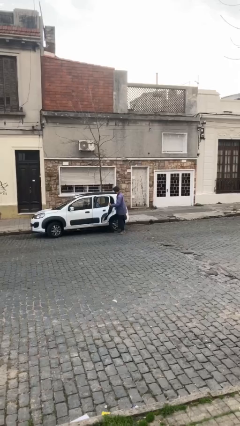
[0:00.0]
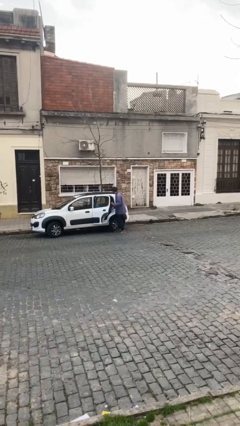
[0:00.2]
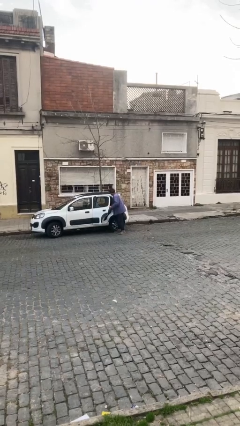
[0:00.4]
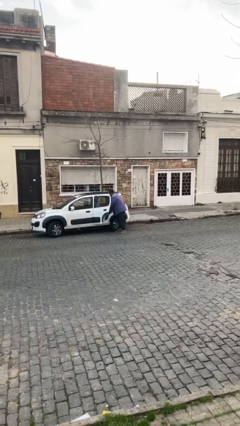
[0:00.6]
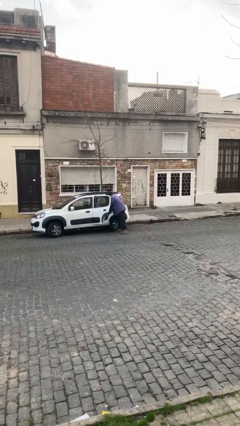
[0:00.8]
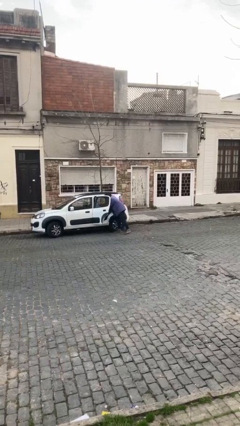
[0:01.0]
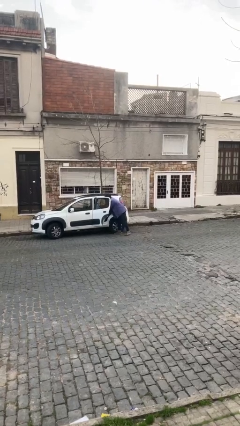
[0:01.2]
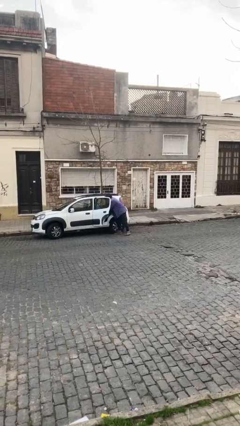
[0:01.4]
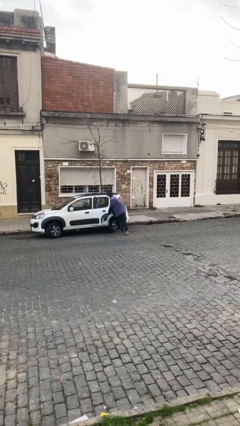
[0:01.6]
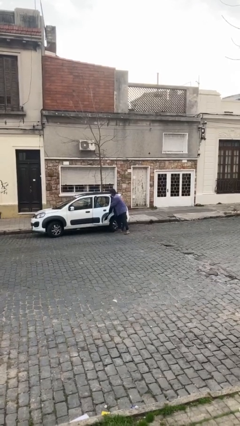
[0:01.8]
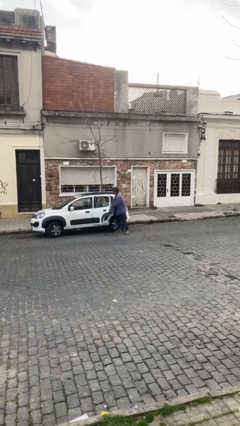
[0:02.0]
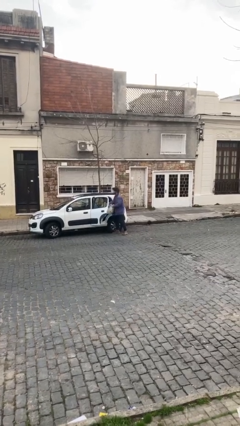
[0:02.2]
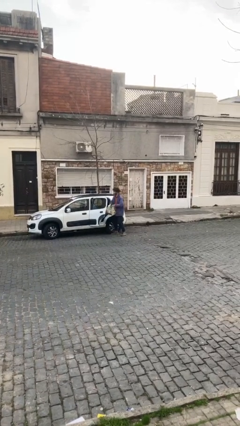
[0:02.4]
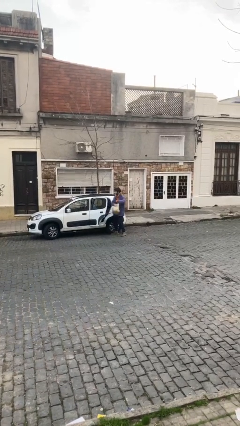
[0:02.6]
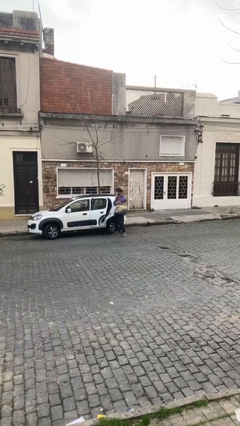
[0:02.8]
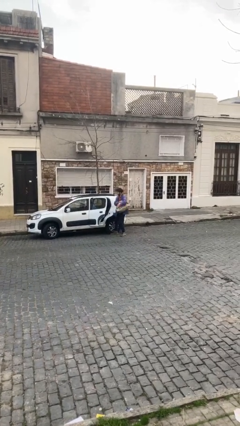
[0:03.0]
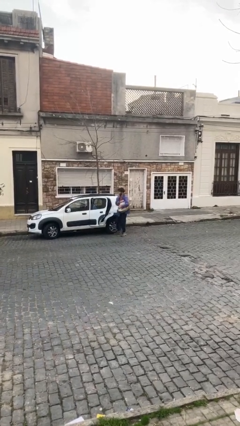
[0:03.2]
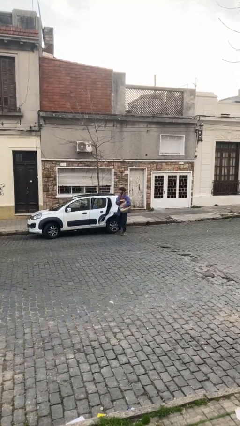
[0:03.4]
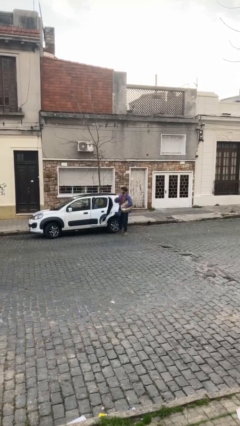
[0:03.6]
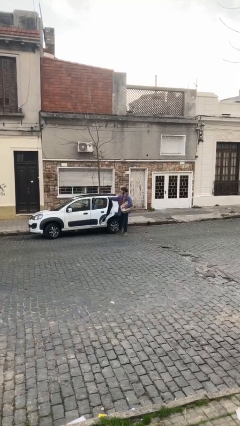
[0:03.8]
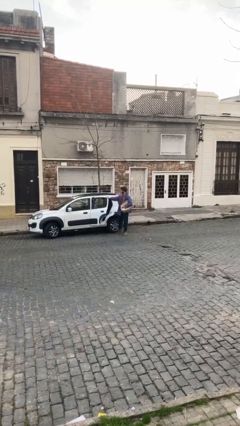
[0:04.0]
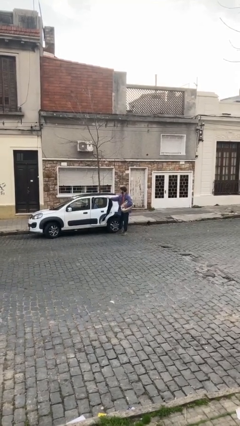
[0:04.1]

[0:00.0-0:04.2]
person unloads car

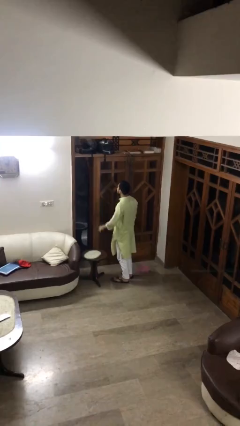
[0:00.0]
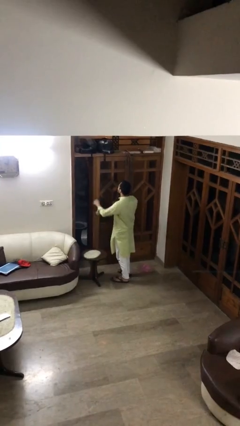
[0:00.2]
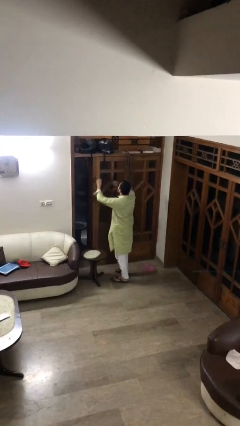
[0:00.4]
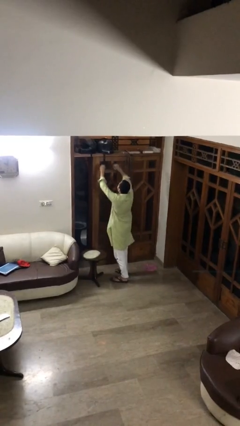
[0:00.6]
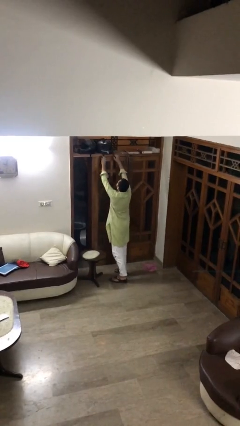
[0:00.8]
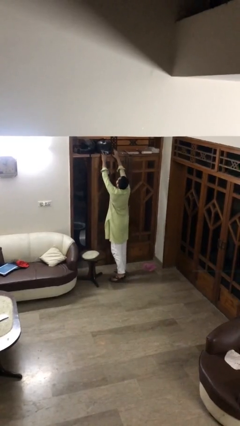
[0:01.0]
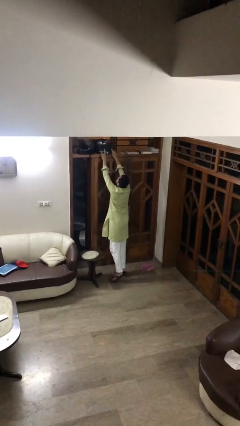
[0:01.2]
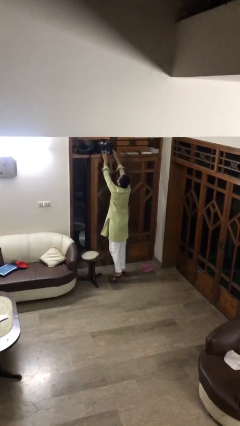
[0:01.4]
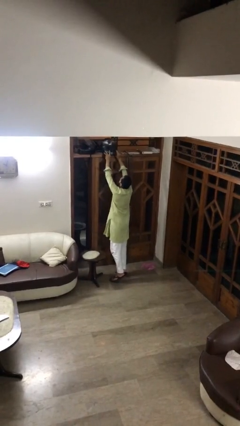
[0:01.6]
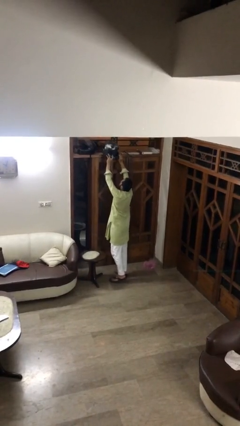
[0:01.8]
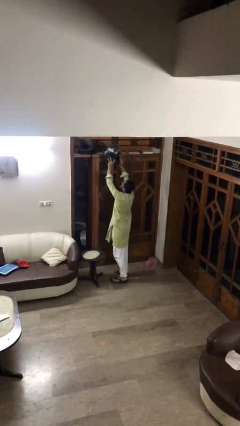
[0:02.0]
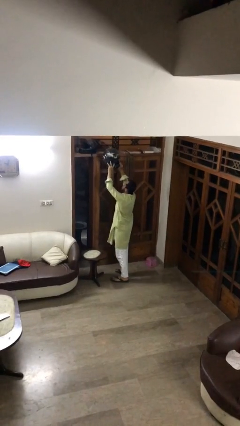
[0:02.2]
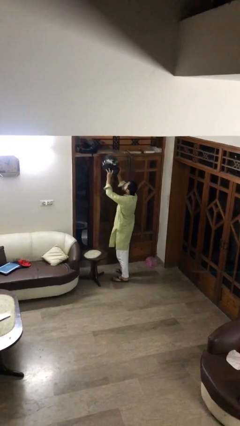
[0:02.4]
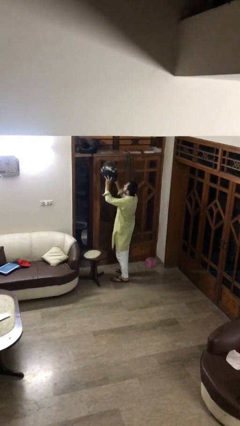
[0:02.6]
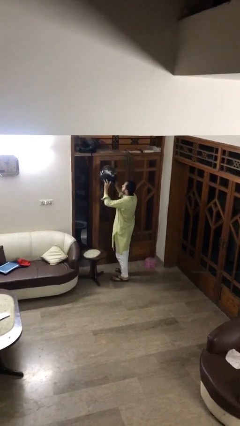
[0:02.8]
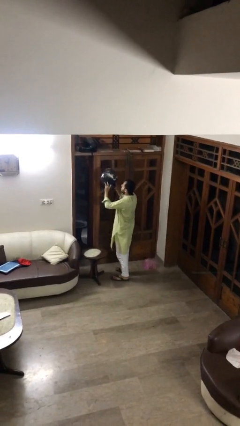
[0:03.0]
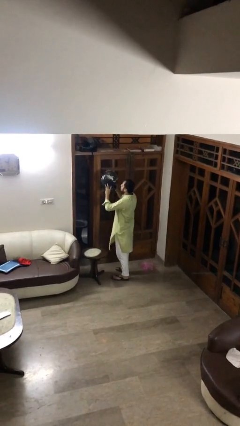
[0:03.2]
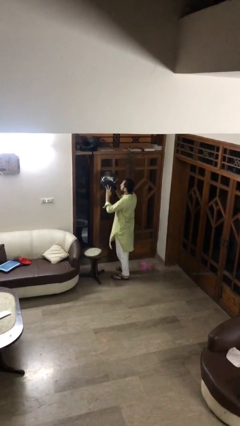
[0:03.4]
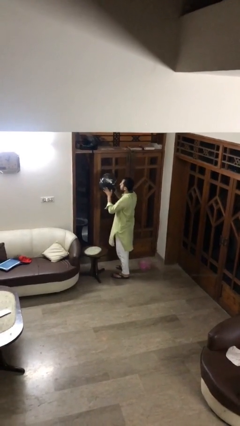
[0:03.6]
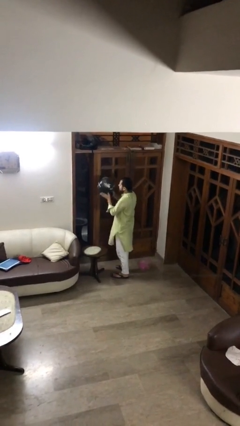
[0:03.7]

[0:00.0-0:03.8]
person picks up object from shelf

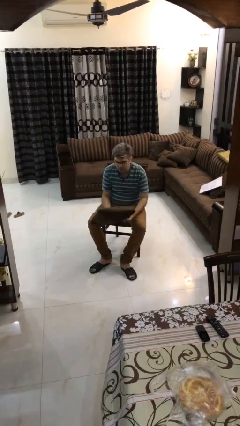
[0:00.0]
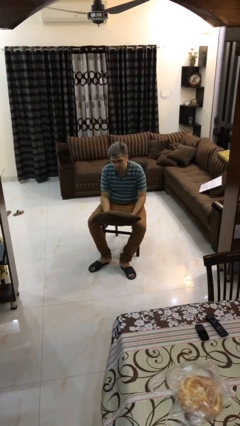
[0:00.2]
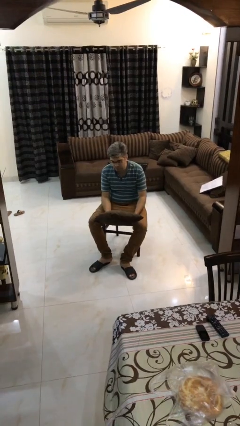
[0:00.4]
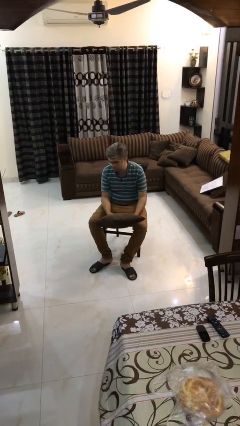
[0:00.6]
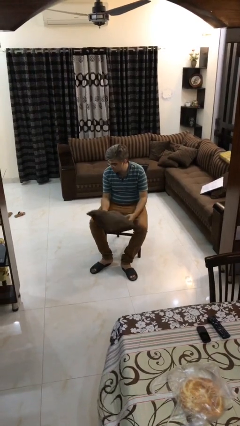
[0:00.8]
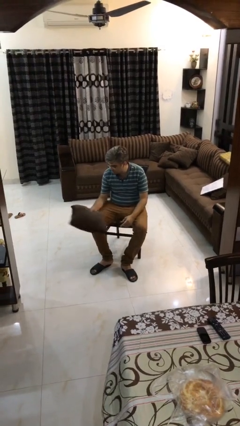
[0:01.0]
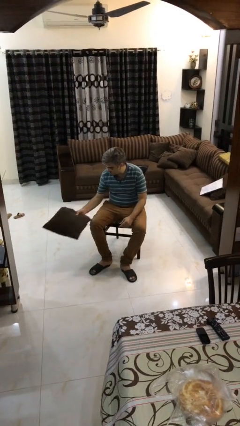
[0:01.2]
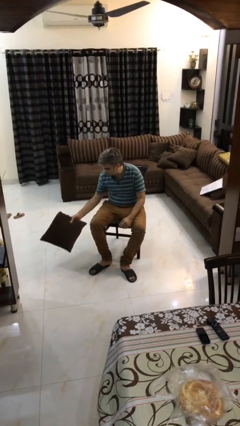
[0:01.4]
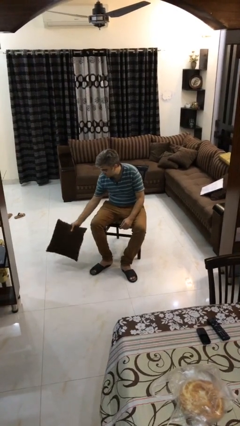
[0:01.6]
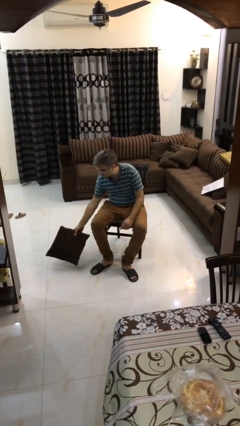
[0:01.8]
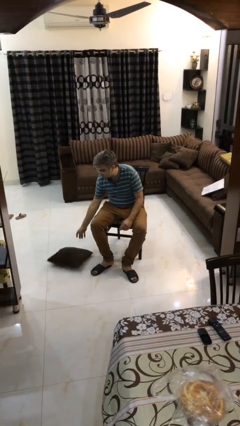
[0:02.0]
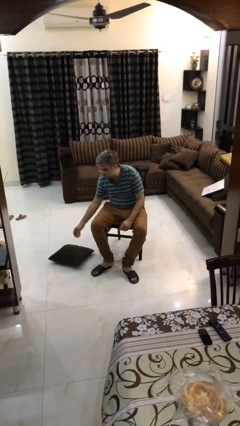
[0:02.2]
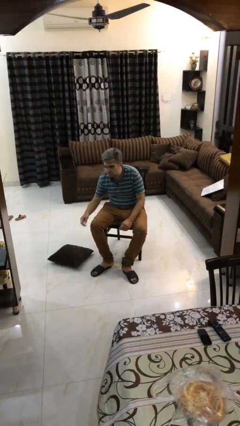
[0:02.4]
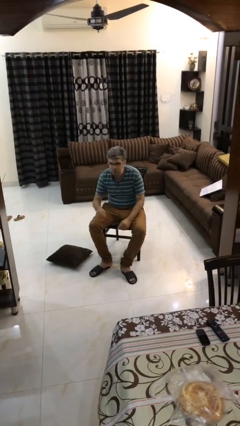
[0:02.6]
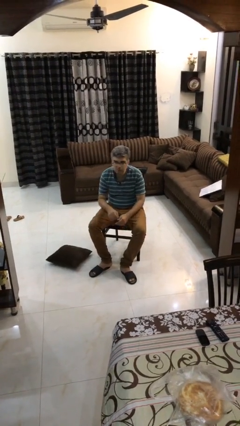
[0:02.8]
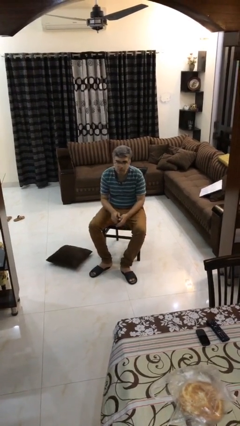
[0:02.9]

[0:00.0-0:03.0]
person puts down object on floor

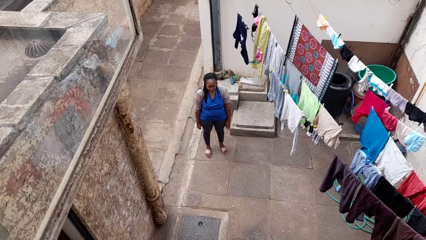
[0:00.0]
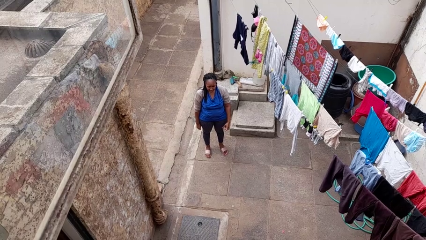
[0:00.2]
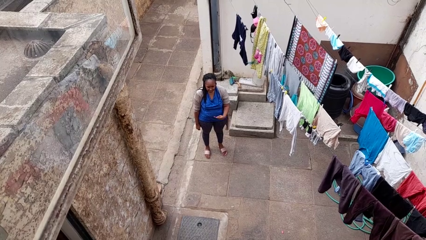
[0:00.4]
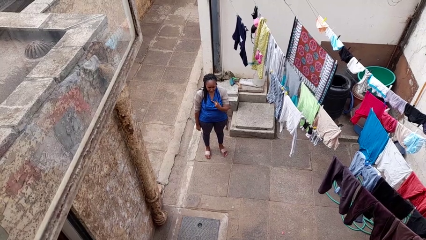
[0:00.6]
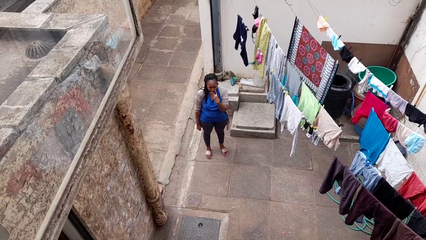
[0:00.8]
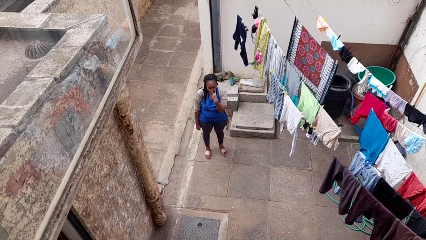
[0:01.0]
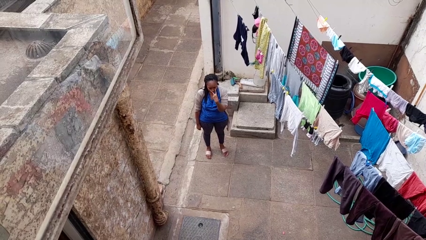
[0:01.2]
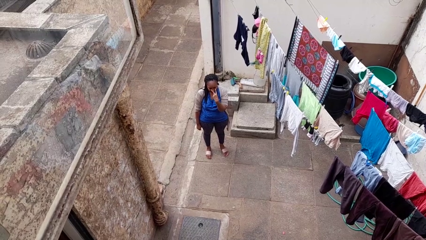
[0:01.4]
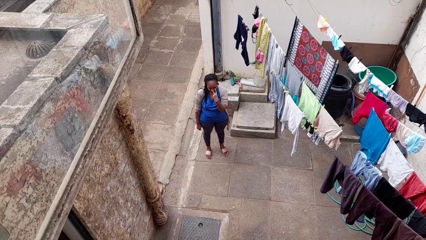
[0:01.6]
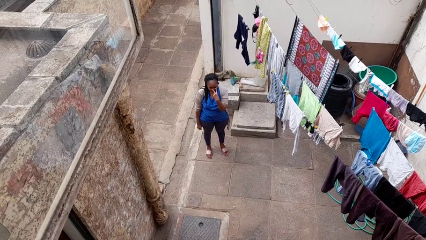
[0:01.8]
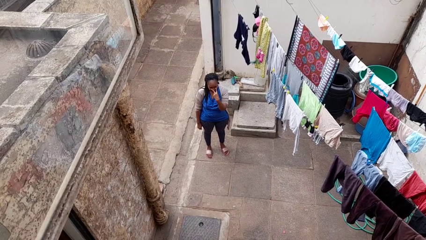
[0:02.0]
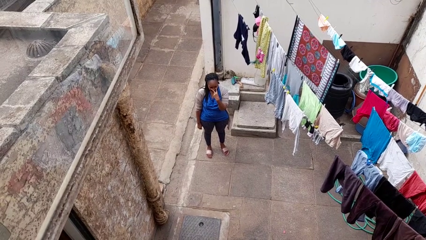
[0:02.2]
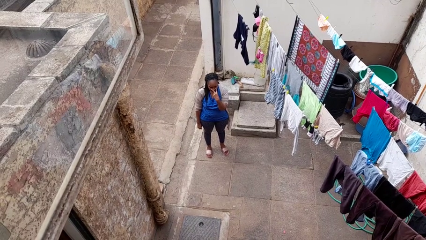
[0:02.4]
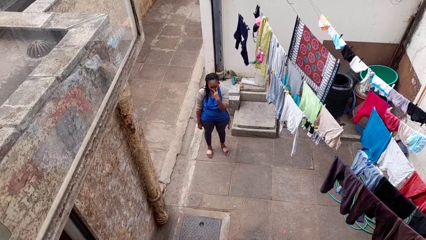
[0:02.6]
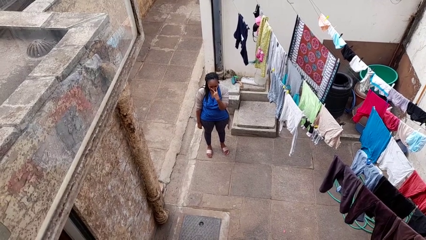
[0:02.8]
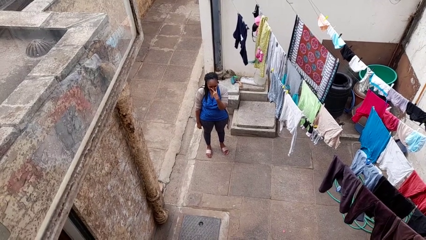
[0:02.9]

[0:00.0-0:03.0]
person gestures watch closely

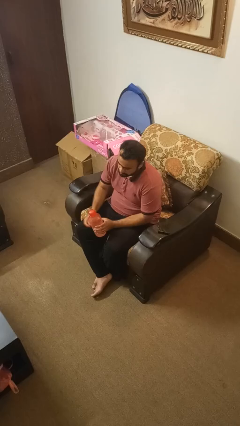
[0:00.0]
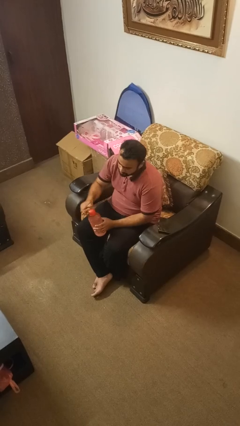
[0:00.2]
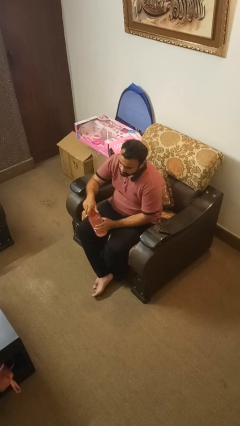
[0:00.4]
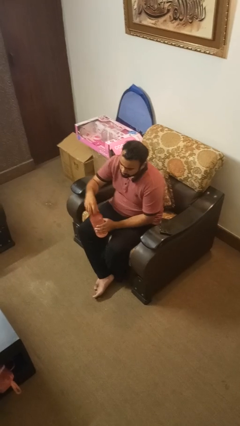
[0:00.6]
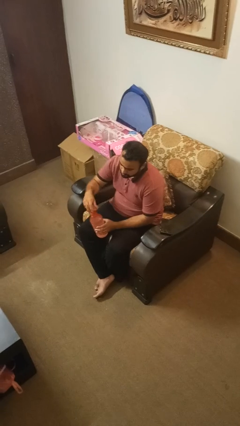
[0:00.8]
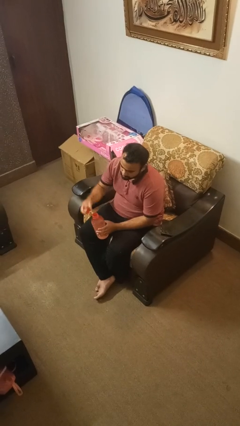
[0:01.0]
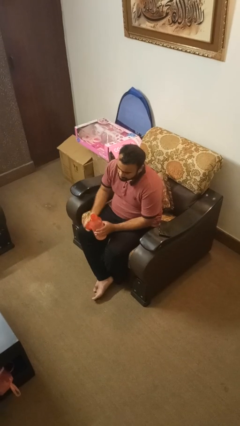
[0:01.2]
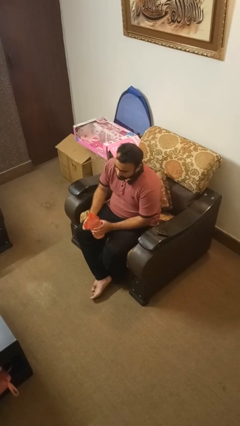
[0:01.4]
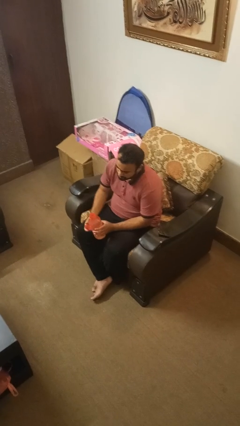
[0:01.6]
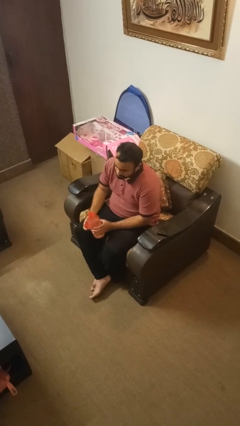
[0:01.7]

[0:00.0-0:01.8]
person unscrews lid from bottle

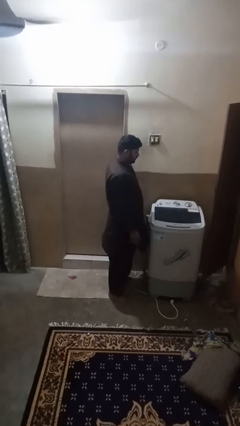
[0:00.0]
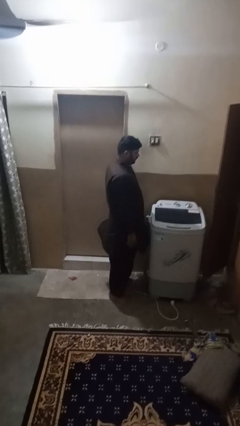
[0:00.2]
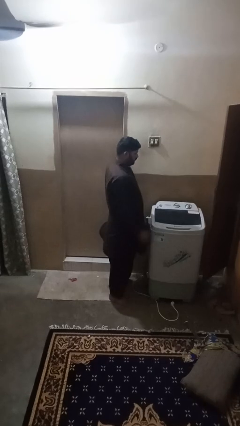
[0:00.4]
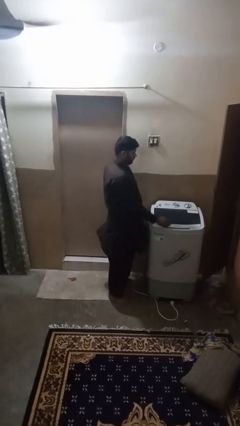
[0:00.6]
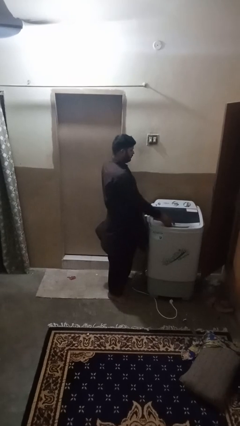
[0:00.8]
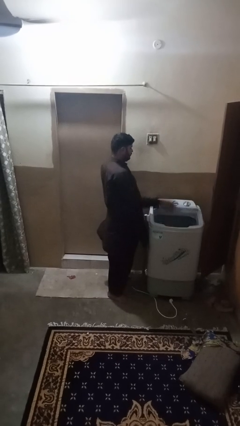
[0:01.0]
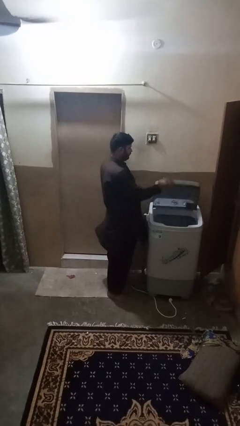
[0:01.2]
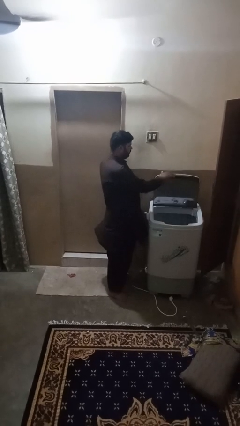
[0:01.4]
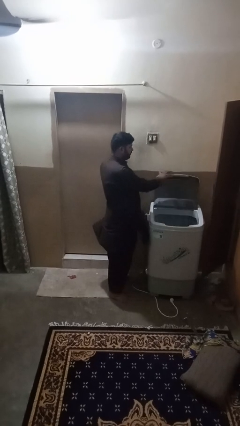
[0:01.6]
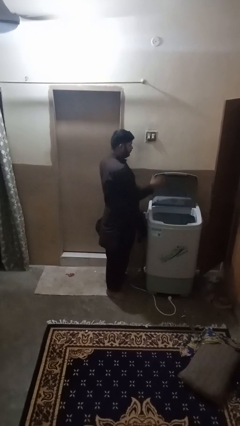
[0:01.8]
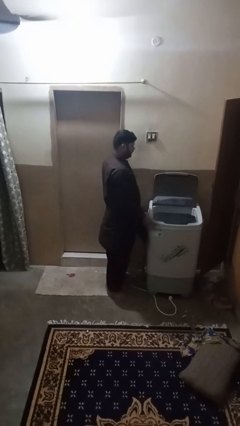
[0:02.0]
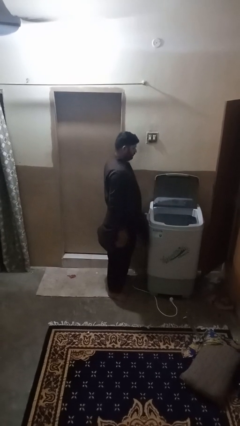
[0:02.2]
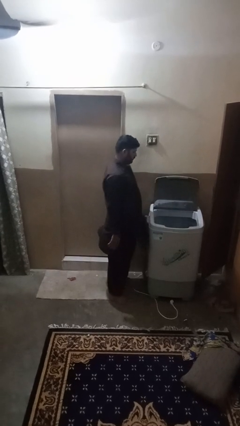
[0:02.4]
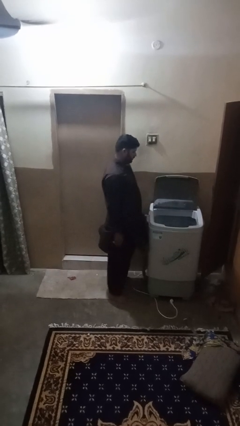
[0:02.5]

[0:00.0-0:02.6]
person opens clothes washer
